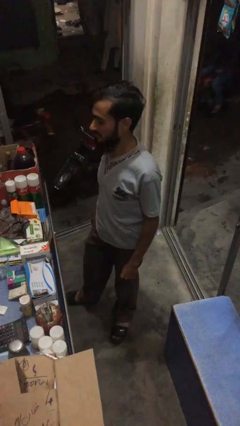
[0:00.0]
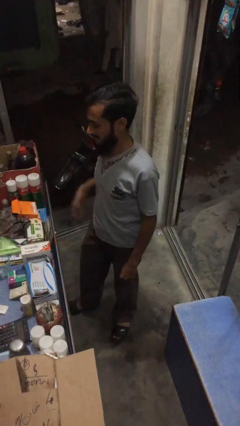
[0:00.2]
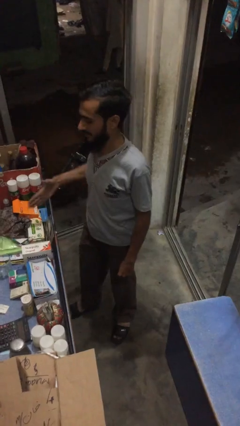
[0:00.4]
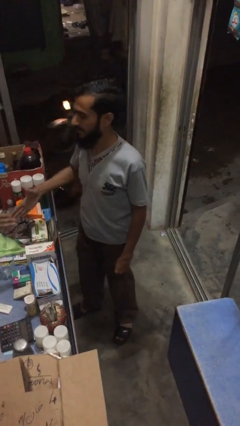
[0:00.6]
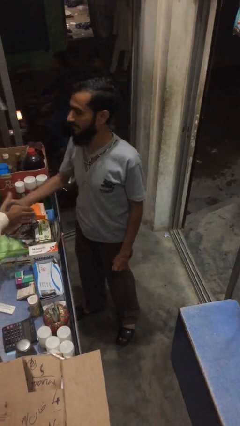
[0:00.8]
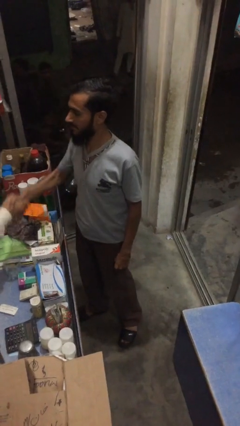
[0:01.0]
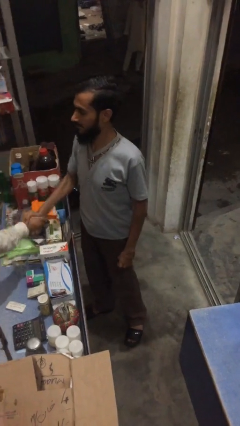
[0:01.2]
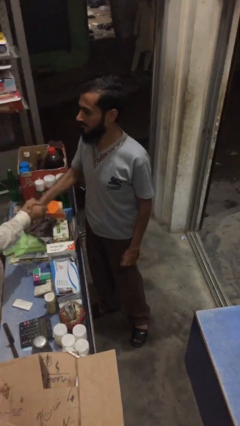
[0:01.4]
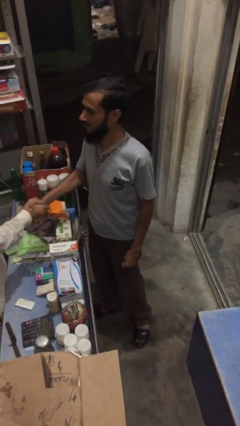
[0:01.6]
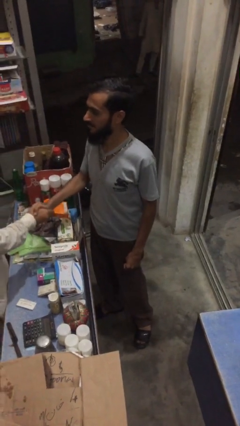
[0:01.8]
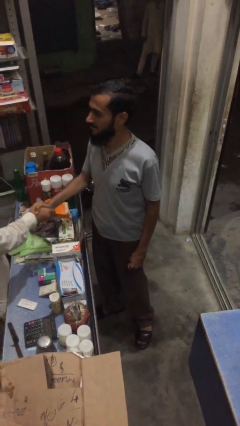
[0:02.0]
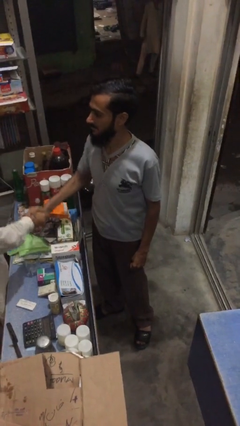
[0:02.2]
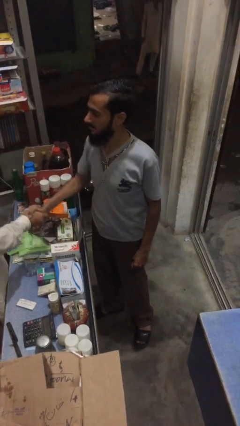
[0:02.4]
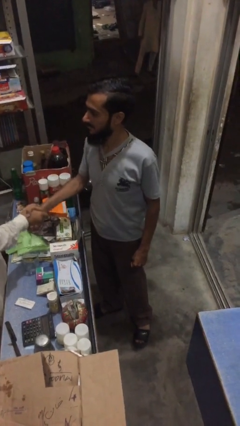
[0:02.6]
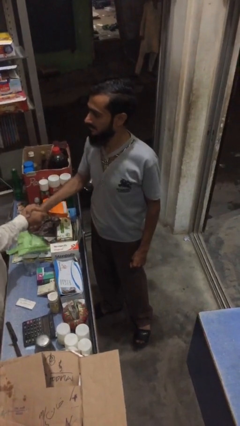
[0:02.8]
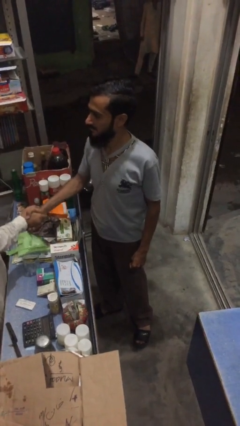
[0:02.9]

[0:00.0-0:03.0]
person shakes hand

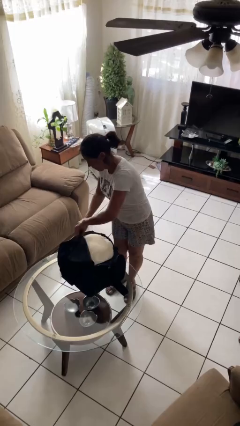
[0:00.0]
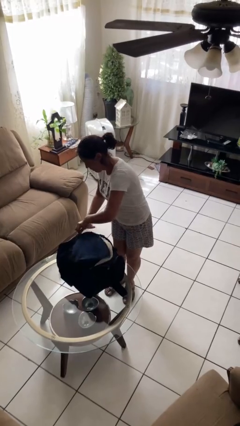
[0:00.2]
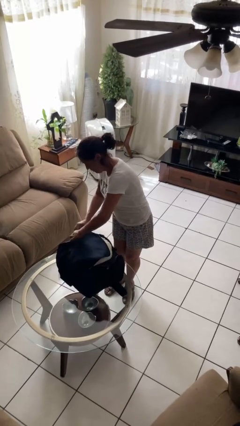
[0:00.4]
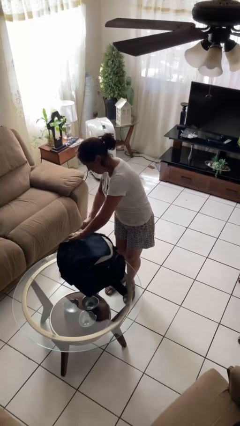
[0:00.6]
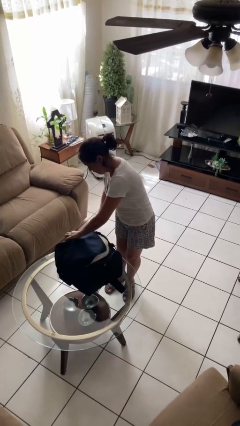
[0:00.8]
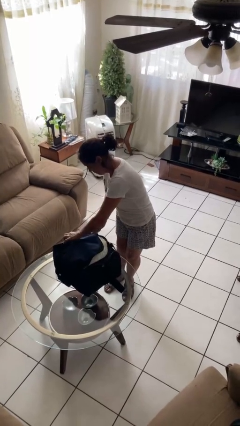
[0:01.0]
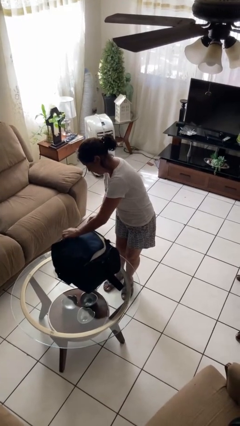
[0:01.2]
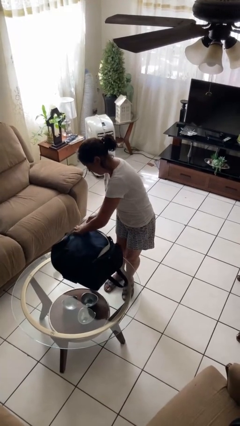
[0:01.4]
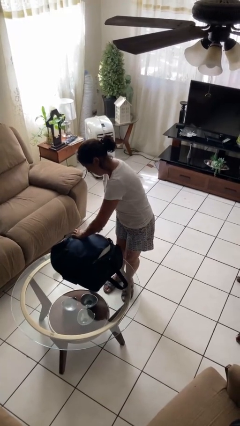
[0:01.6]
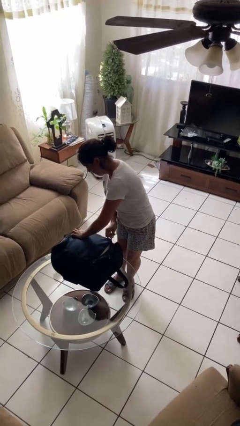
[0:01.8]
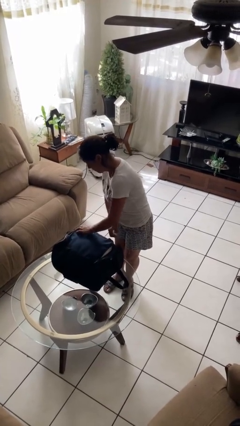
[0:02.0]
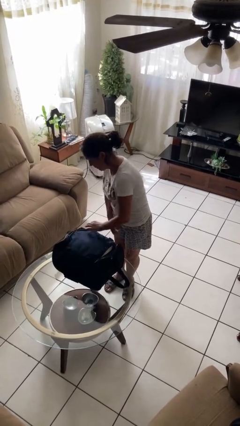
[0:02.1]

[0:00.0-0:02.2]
person closes suitcase

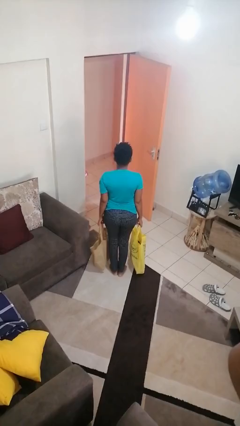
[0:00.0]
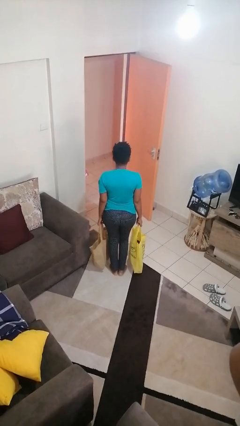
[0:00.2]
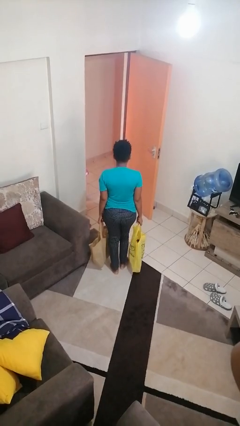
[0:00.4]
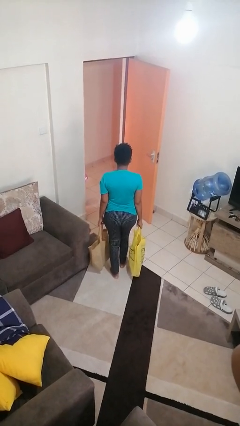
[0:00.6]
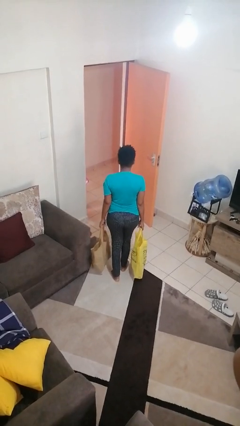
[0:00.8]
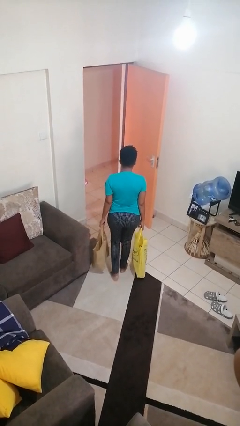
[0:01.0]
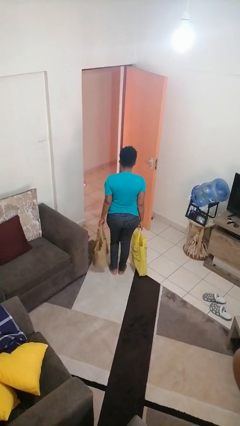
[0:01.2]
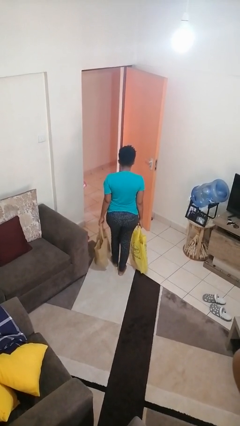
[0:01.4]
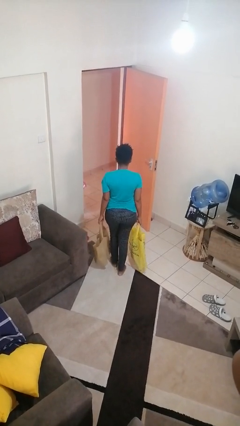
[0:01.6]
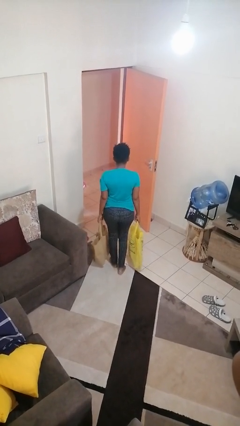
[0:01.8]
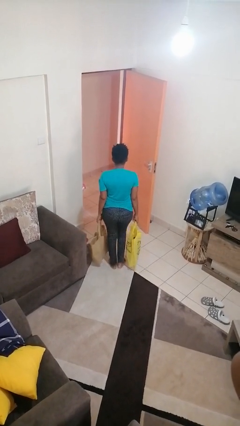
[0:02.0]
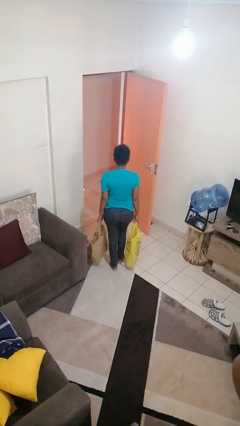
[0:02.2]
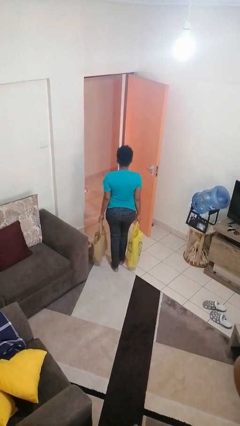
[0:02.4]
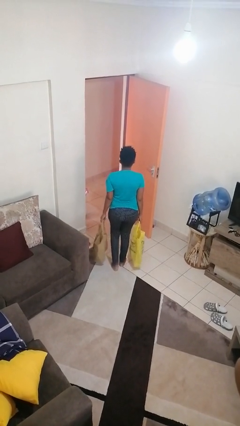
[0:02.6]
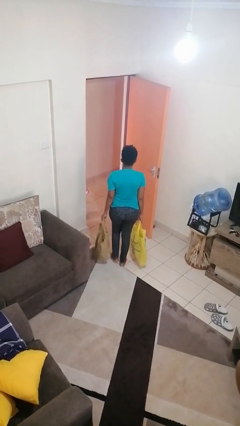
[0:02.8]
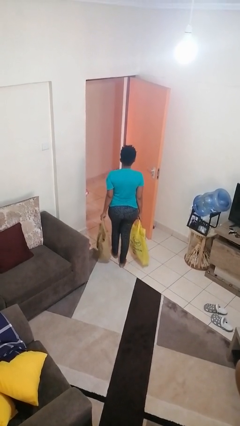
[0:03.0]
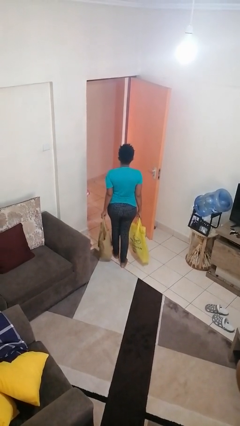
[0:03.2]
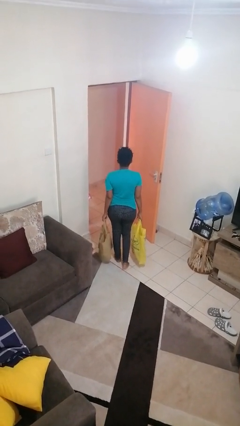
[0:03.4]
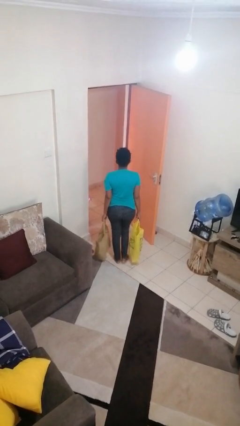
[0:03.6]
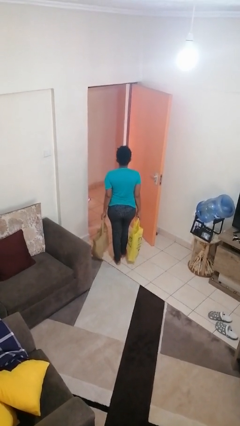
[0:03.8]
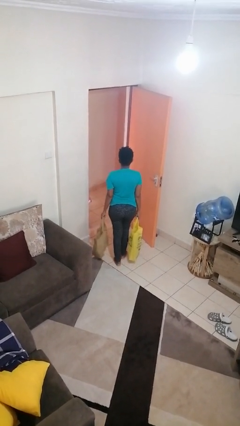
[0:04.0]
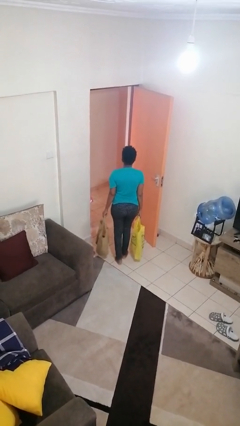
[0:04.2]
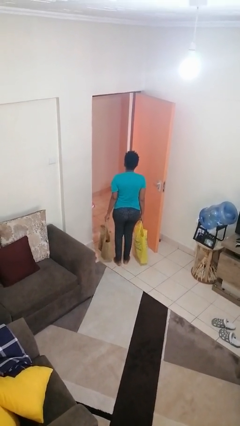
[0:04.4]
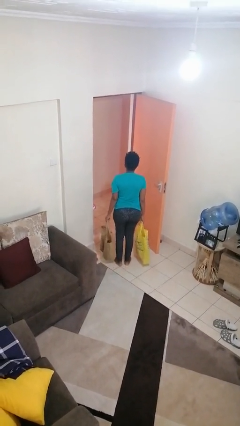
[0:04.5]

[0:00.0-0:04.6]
person carries groceries

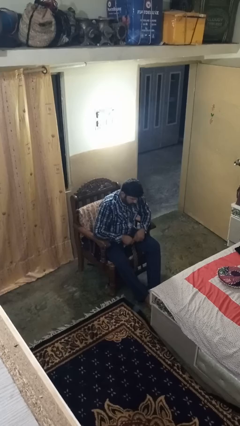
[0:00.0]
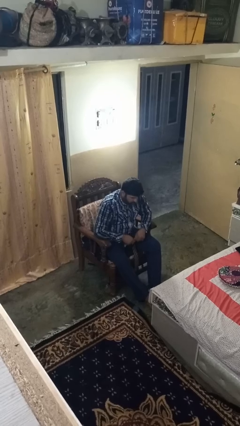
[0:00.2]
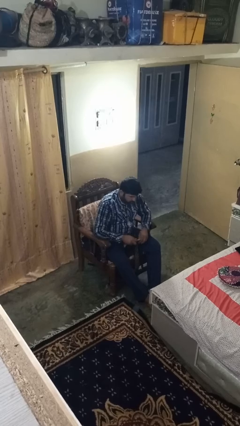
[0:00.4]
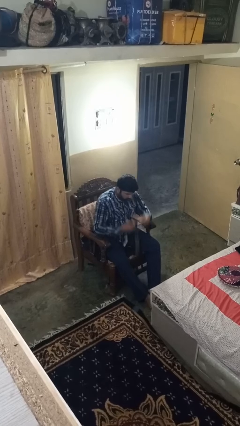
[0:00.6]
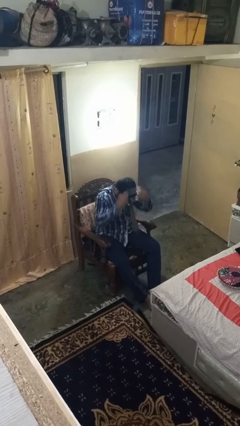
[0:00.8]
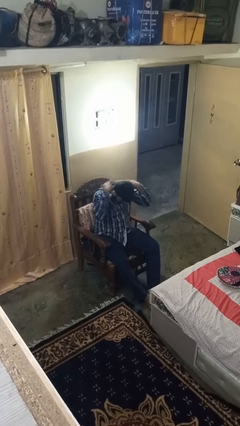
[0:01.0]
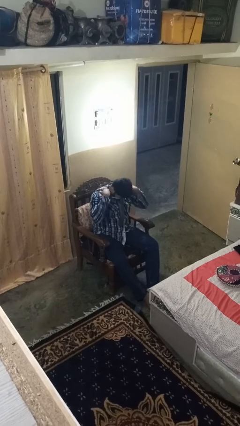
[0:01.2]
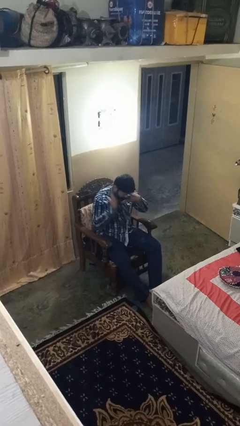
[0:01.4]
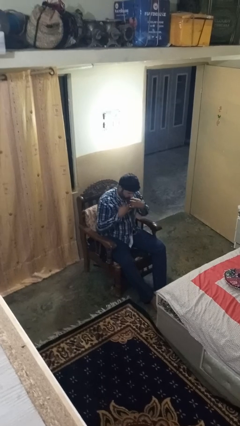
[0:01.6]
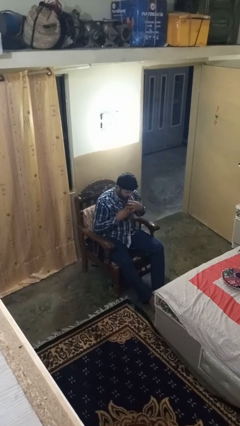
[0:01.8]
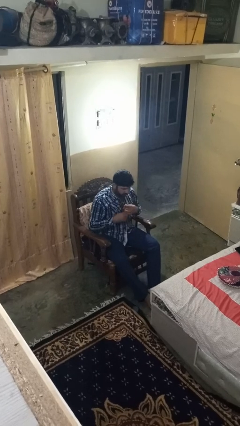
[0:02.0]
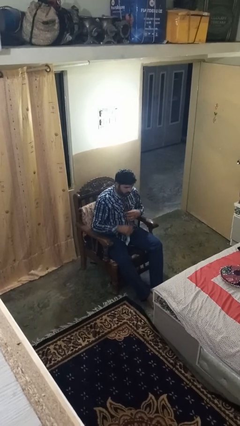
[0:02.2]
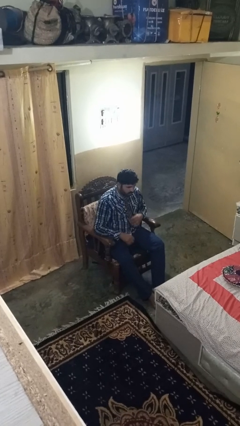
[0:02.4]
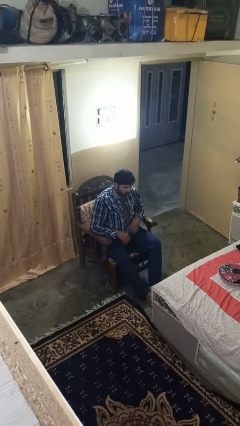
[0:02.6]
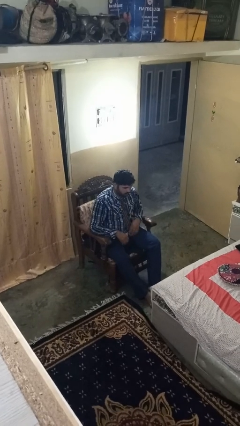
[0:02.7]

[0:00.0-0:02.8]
person puts on necktie

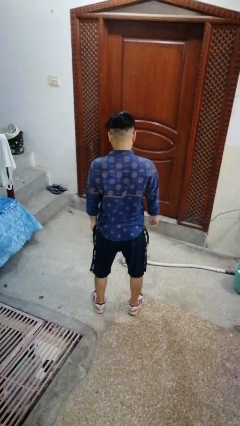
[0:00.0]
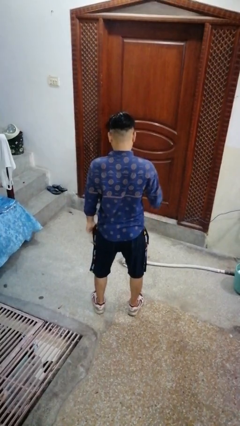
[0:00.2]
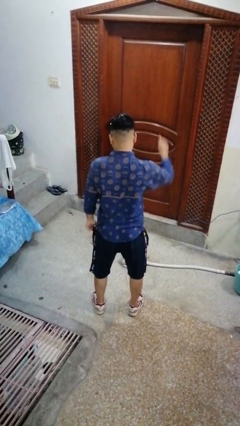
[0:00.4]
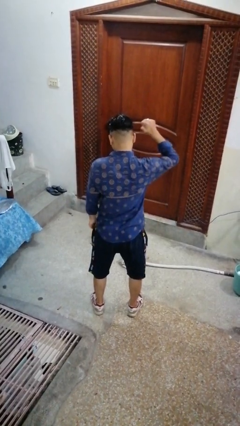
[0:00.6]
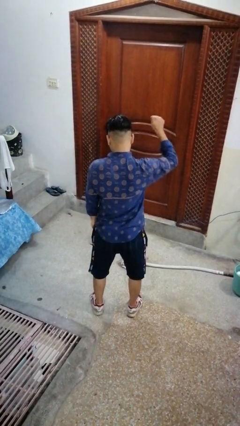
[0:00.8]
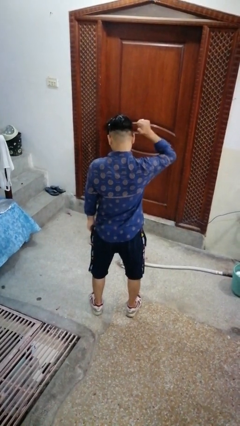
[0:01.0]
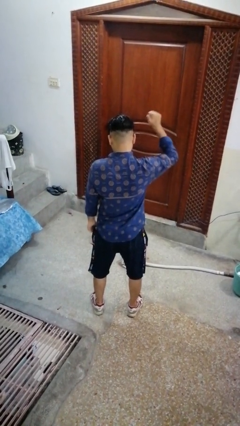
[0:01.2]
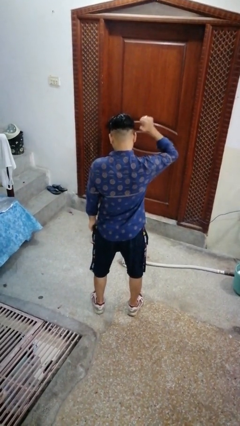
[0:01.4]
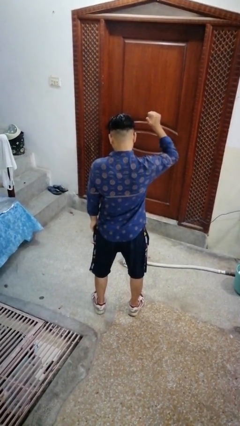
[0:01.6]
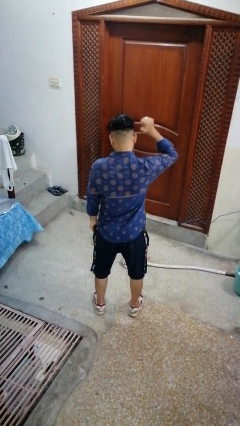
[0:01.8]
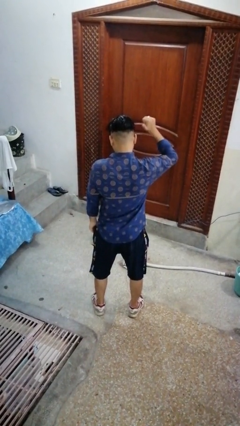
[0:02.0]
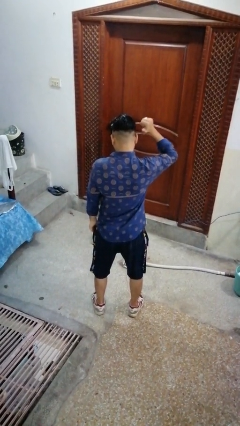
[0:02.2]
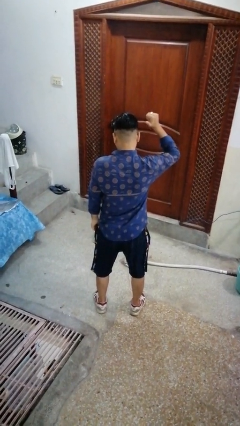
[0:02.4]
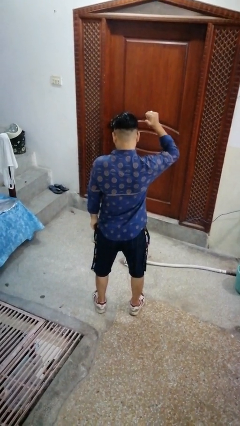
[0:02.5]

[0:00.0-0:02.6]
person gestures behind me

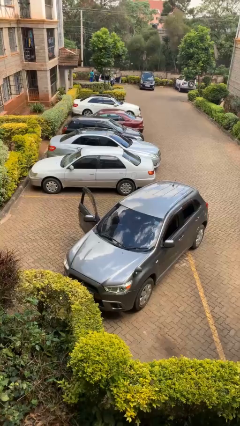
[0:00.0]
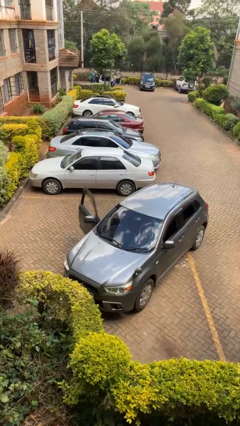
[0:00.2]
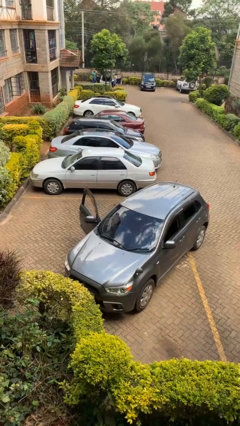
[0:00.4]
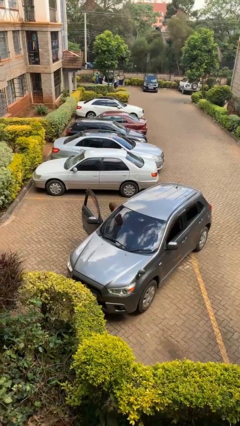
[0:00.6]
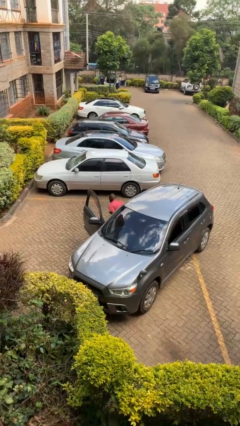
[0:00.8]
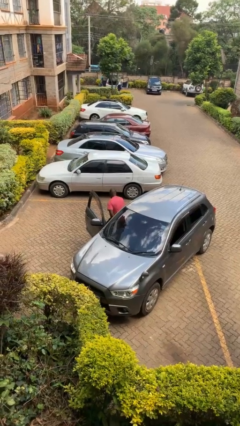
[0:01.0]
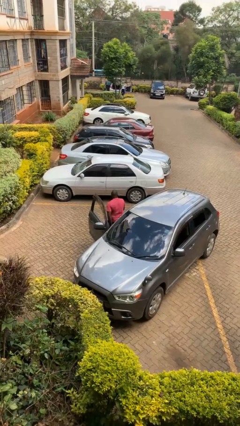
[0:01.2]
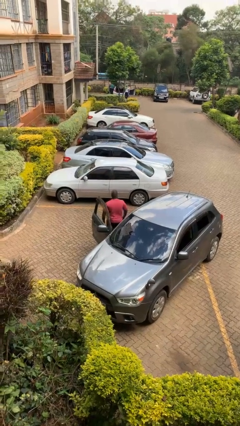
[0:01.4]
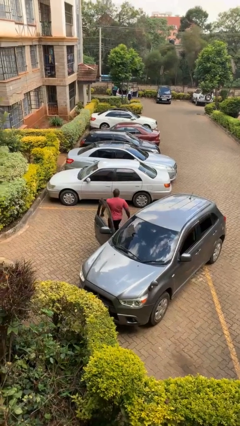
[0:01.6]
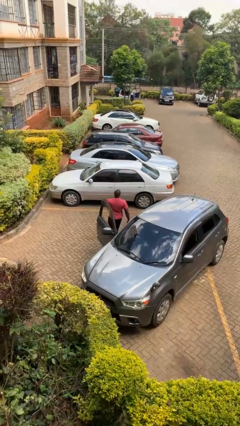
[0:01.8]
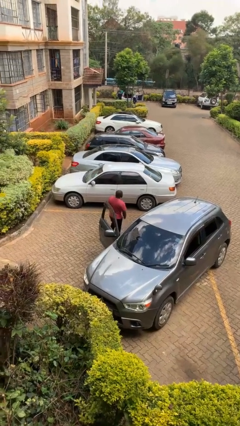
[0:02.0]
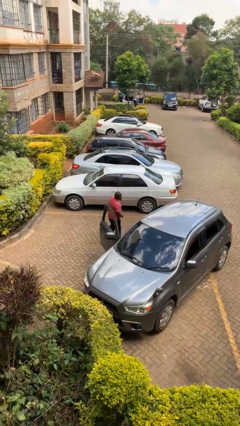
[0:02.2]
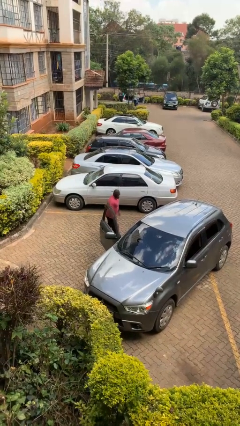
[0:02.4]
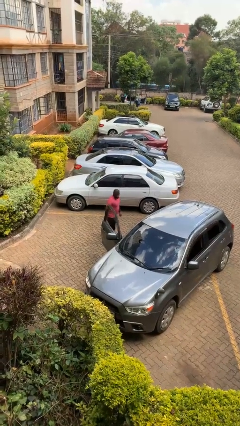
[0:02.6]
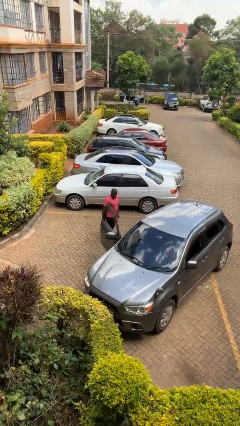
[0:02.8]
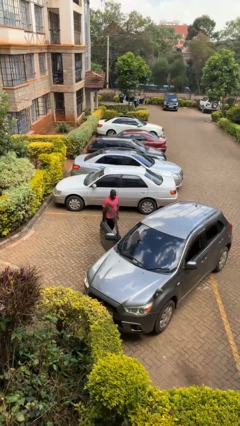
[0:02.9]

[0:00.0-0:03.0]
person exits car
